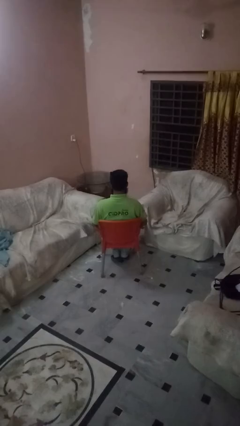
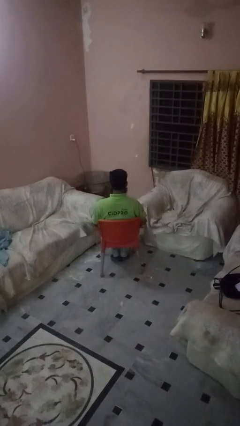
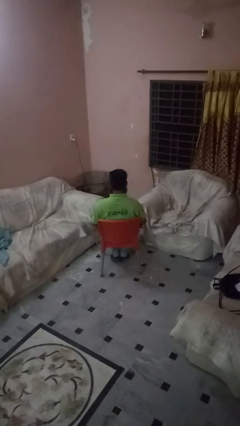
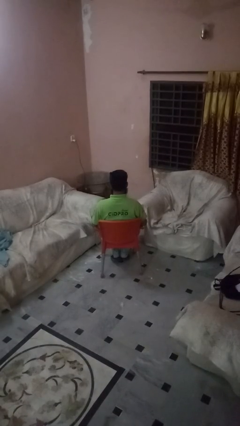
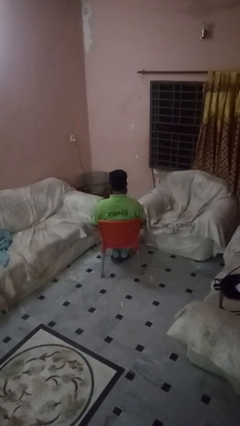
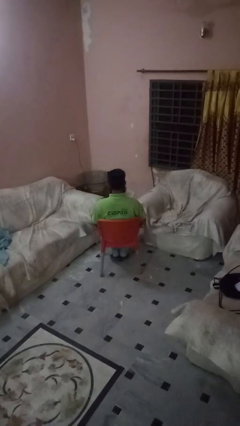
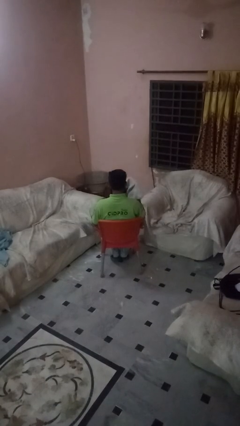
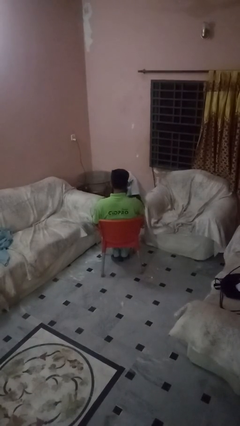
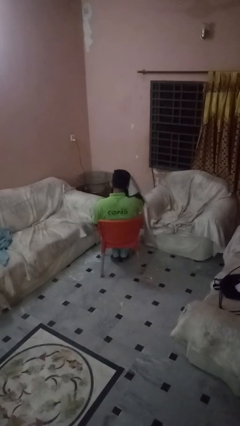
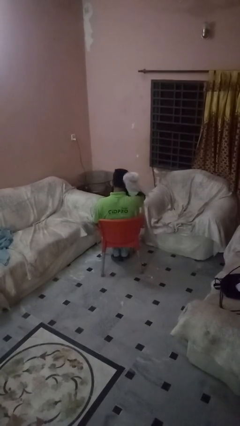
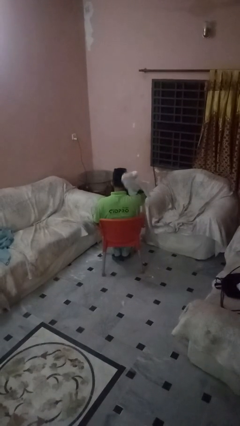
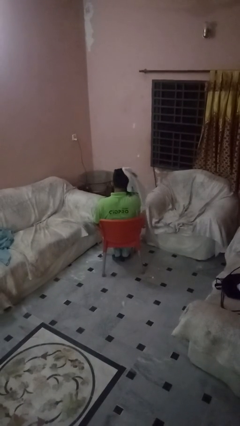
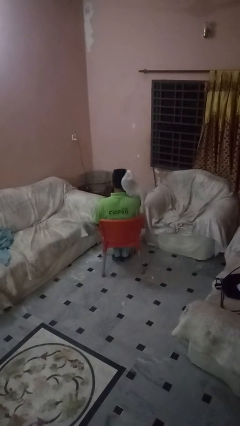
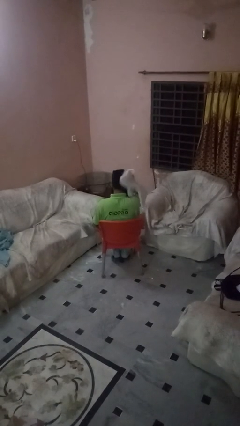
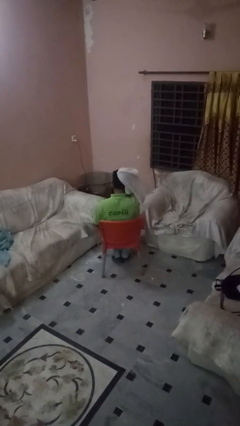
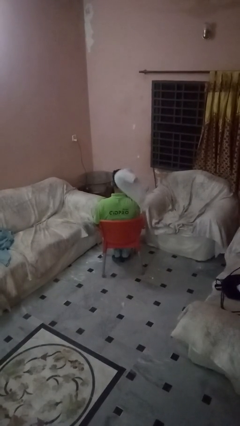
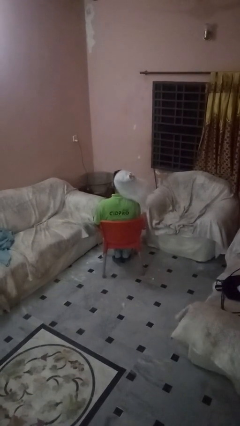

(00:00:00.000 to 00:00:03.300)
person dries hair with towel

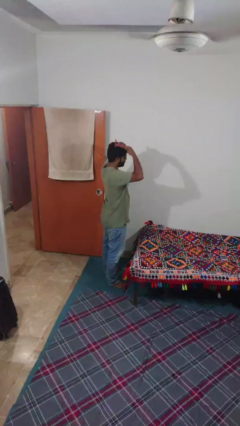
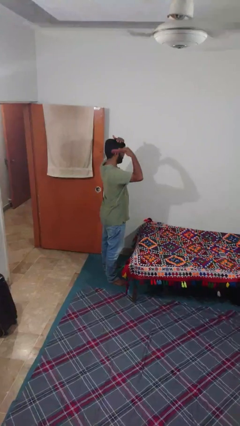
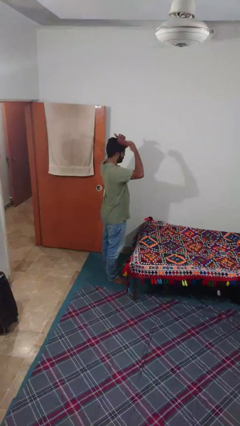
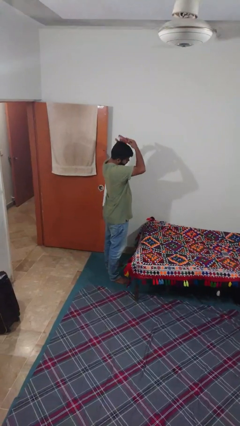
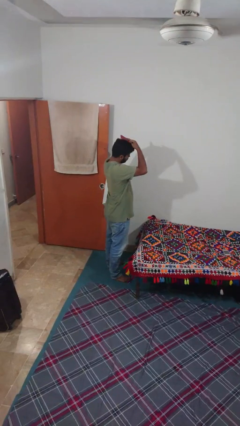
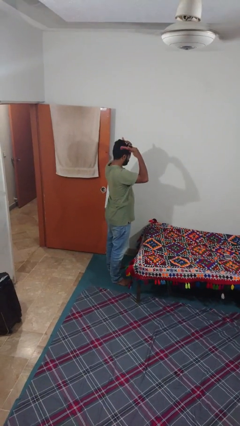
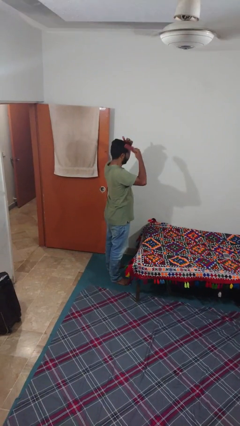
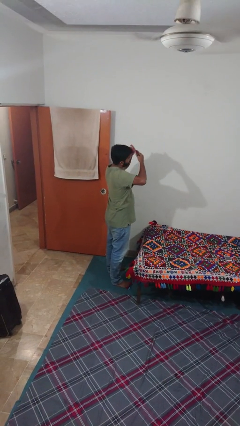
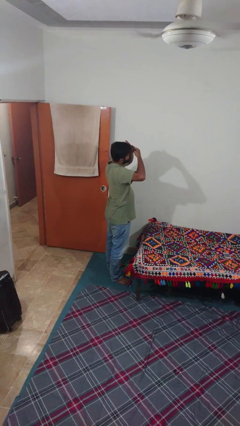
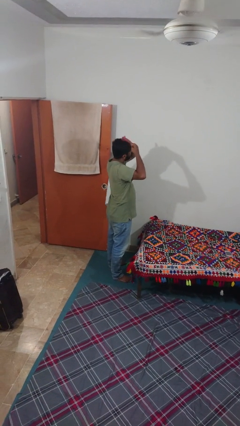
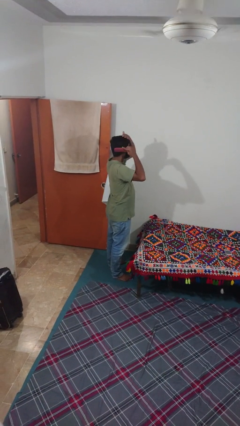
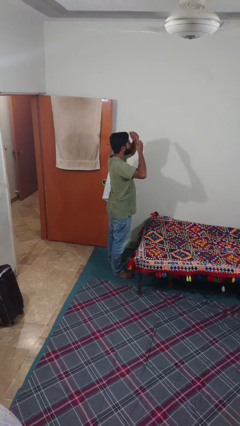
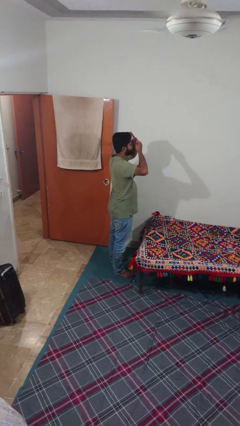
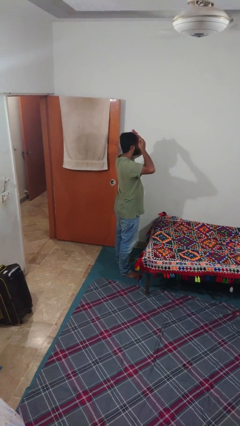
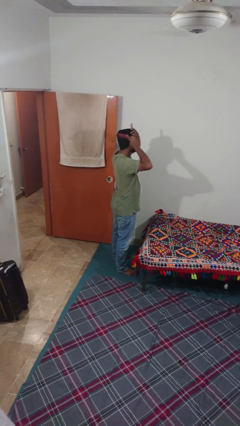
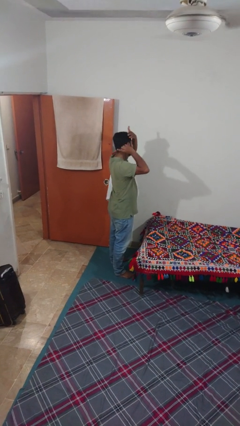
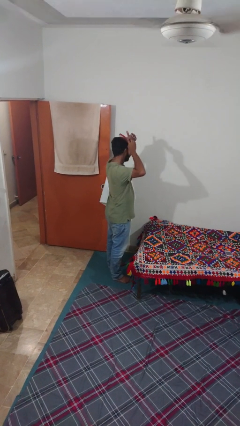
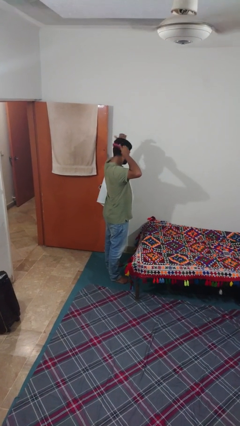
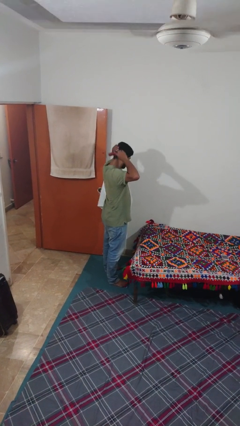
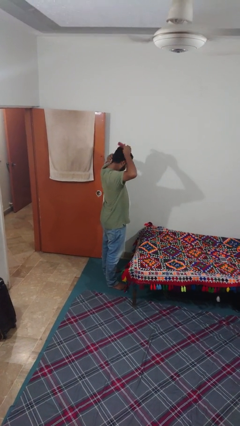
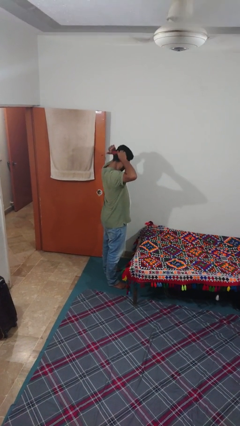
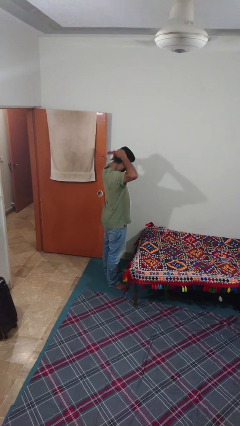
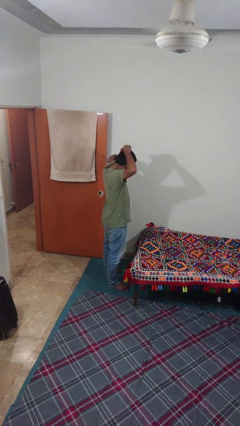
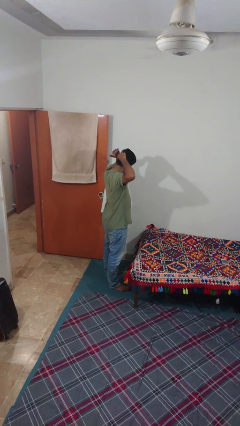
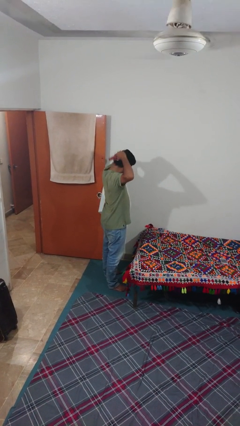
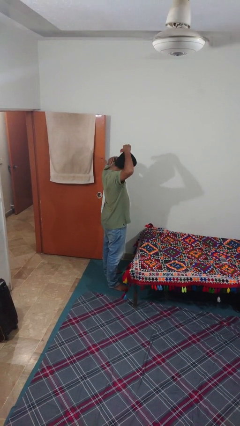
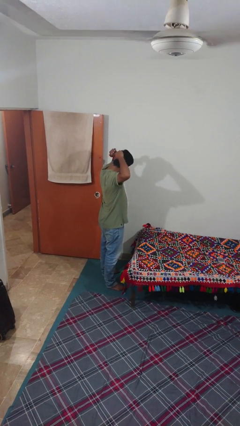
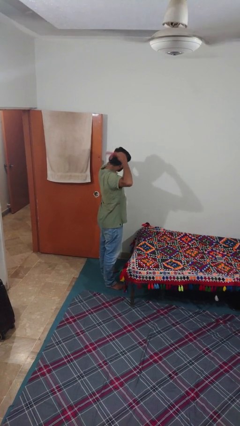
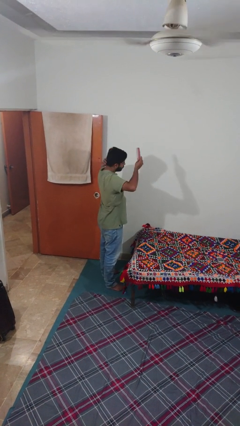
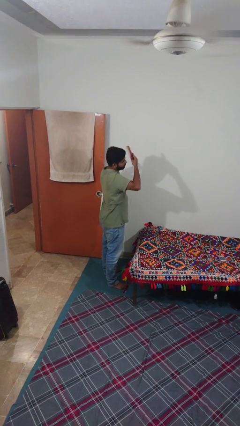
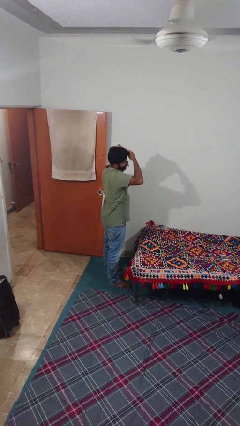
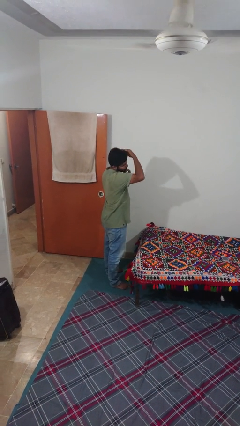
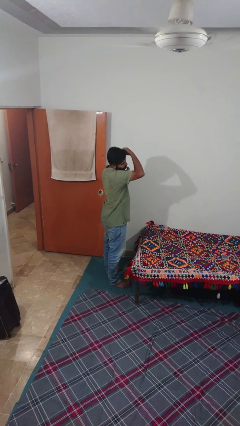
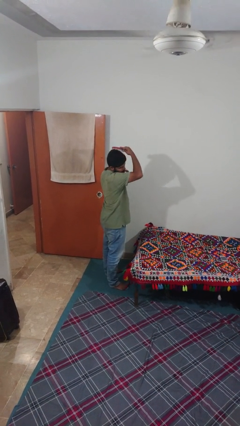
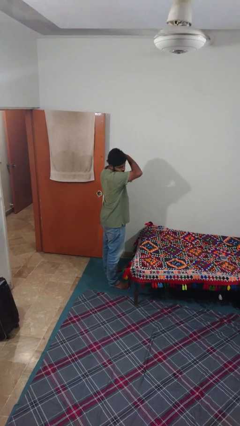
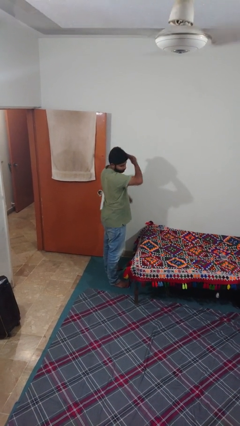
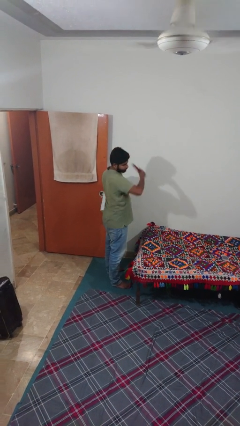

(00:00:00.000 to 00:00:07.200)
person brushes hair

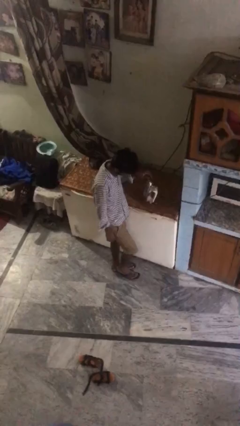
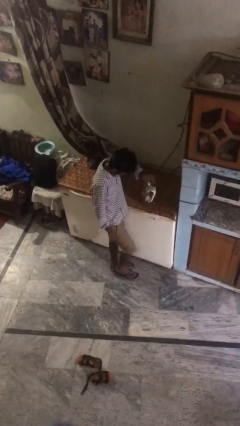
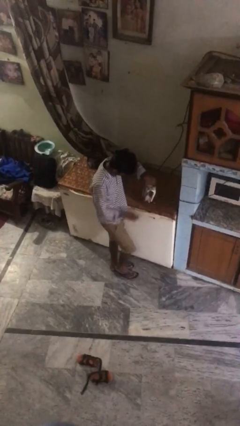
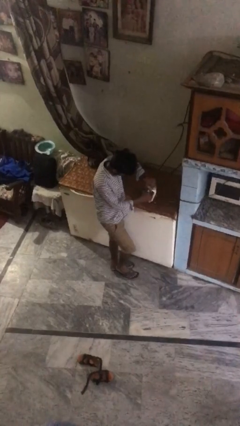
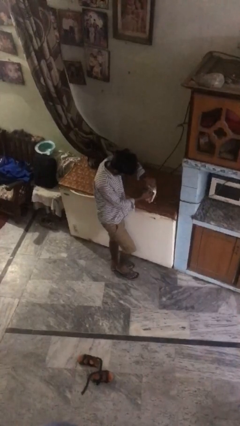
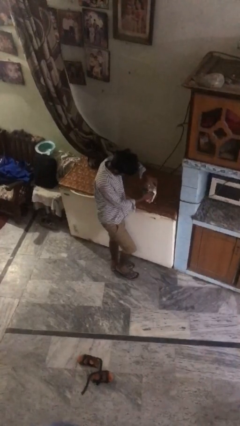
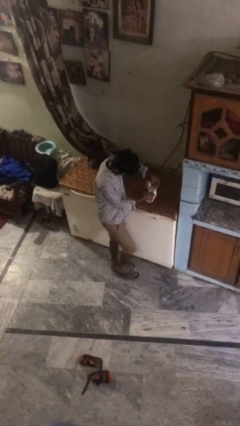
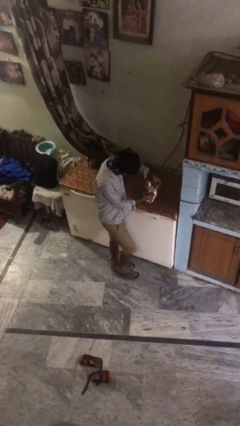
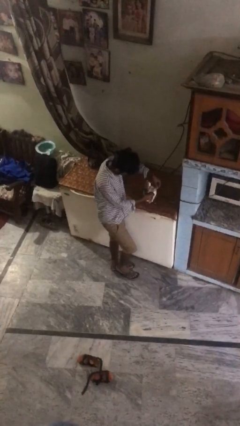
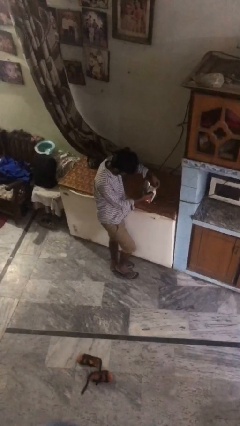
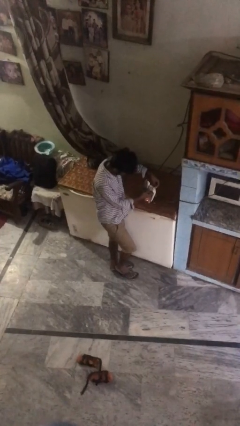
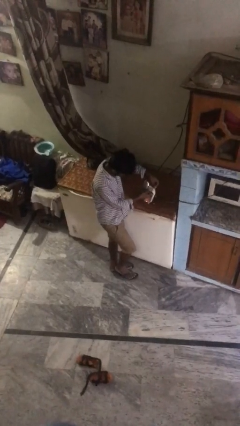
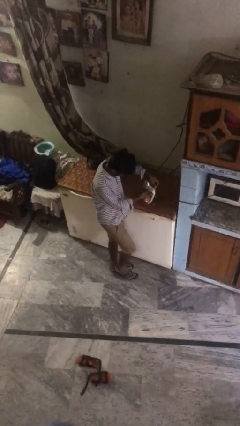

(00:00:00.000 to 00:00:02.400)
person adjusts thermostat

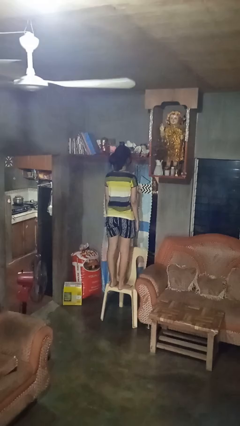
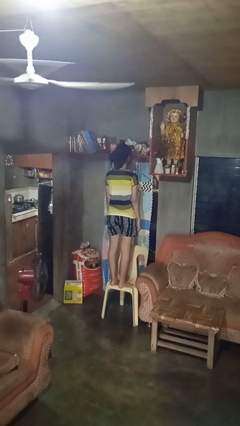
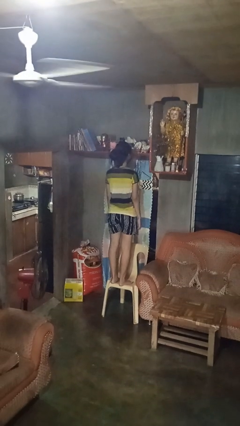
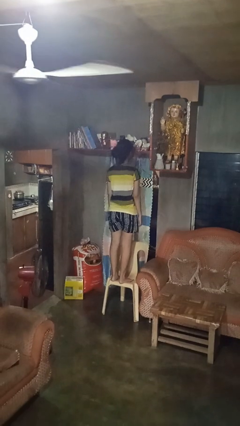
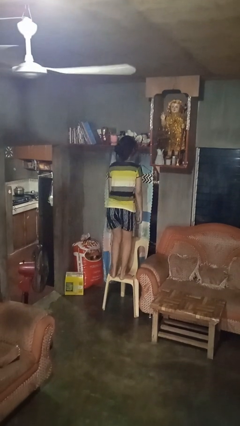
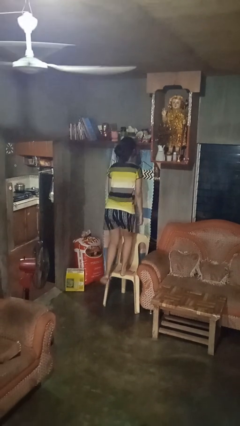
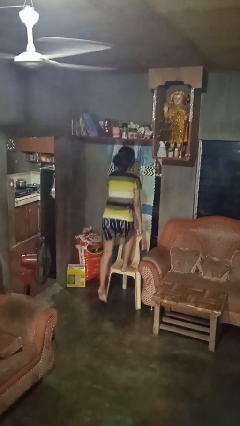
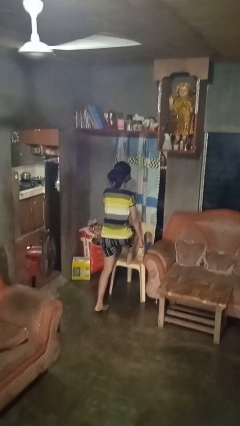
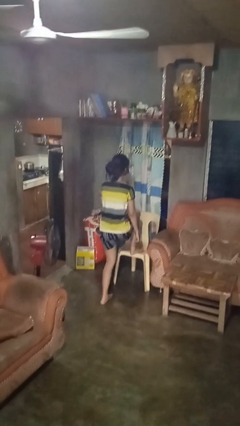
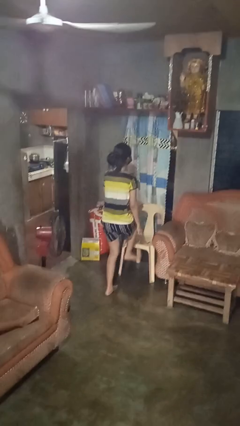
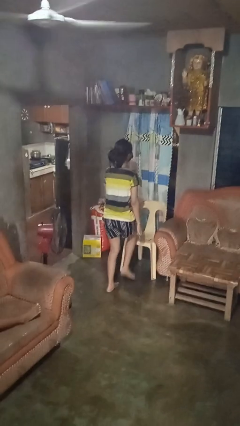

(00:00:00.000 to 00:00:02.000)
person climbs off chair

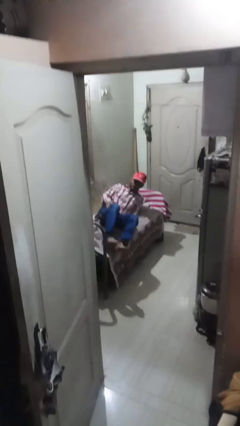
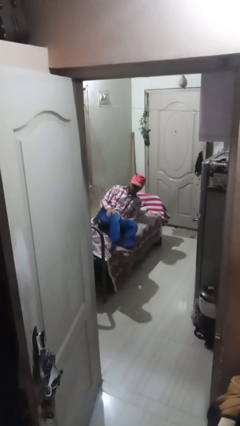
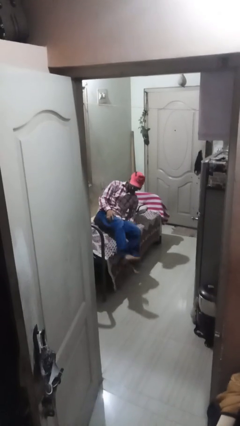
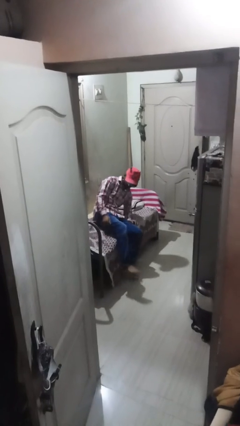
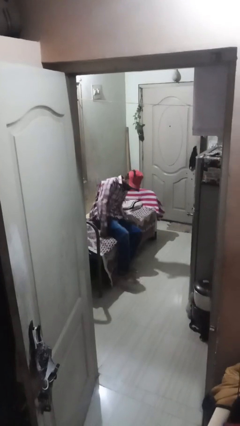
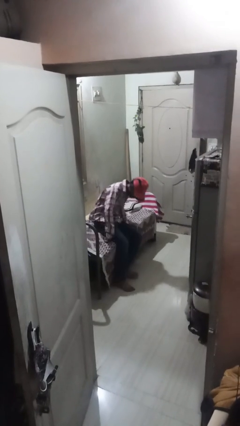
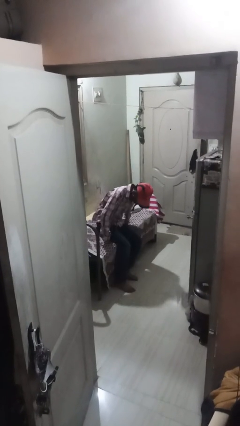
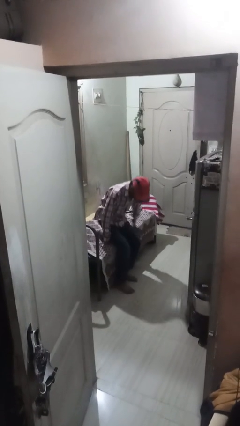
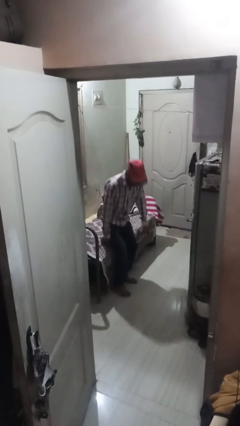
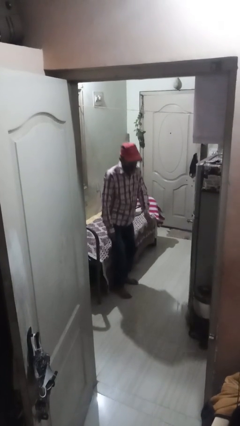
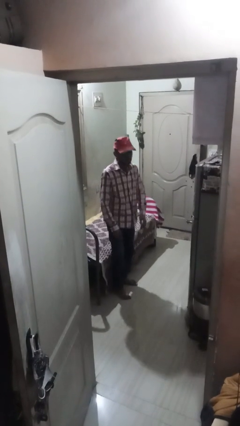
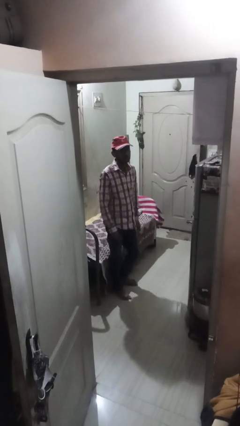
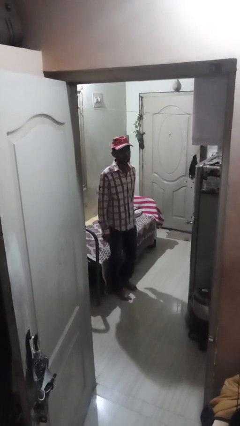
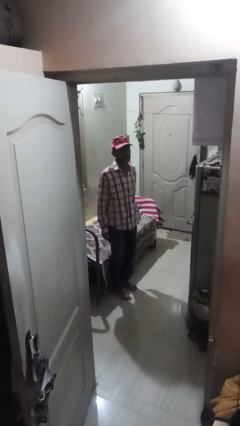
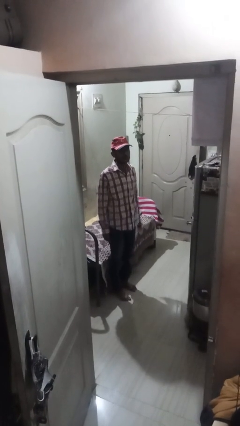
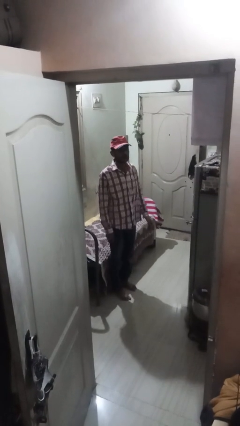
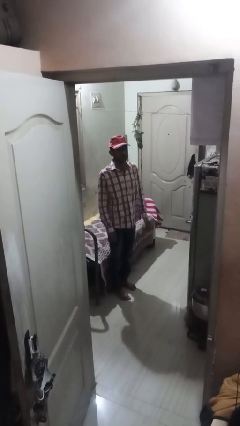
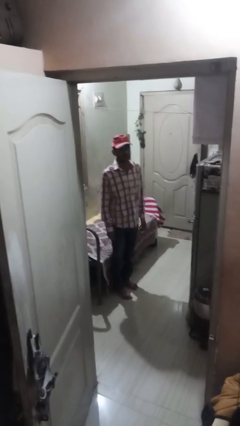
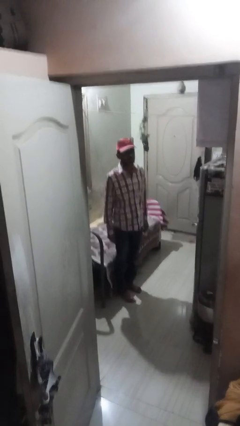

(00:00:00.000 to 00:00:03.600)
person stands up
